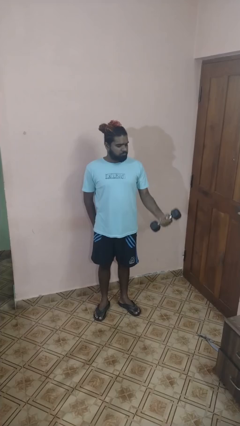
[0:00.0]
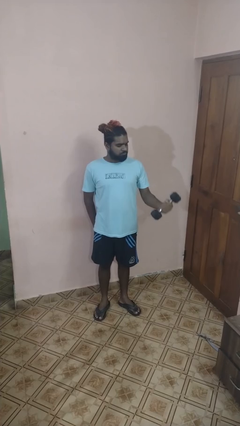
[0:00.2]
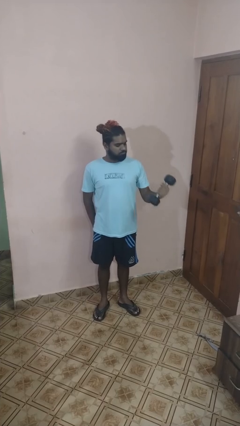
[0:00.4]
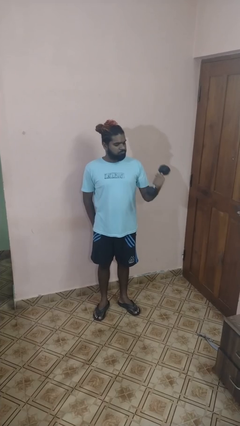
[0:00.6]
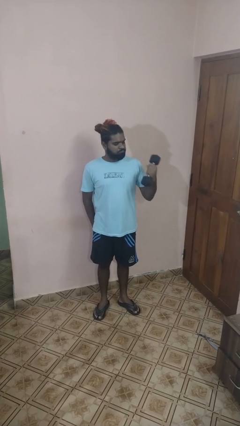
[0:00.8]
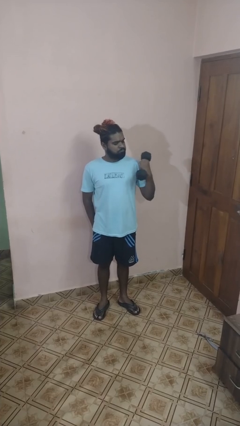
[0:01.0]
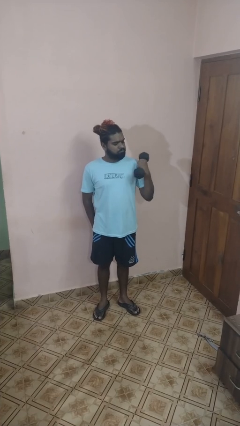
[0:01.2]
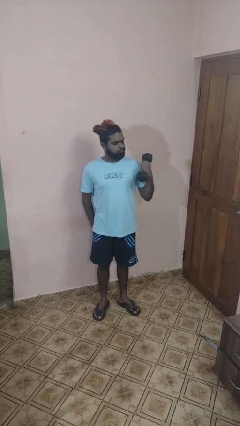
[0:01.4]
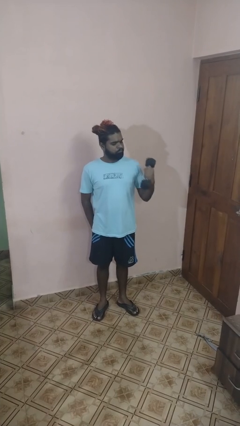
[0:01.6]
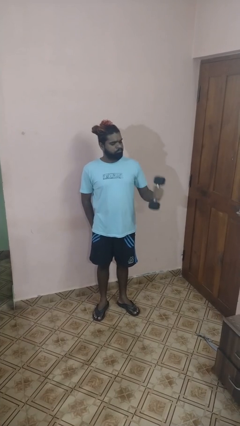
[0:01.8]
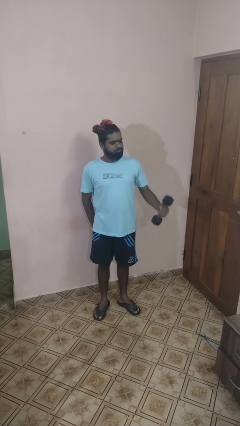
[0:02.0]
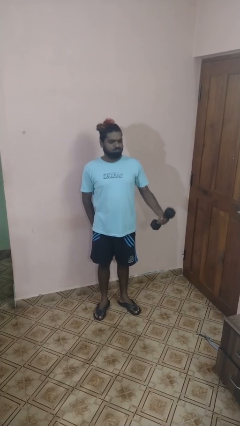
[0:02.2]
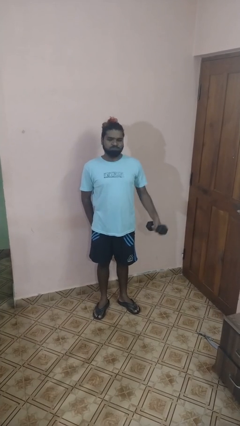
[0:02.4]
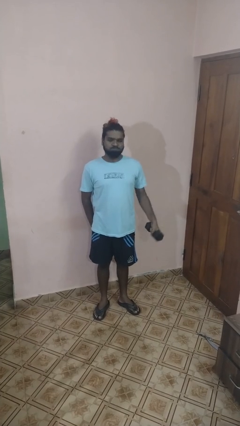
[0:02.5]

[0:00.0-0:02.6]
person lifts dumbbells

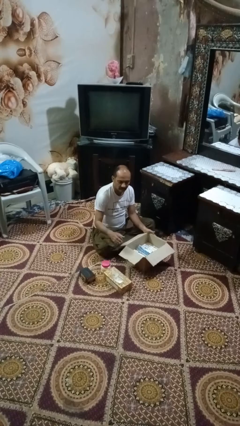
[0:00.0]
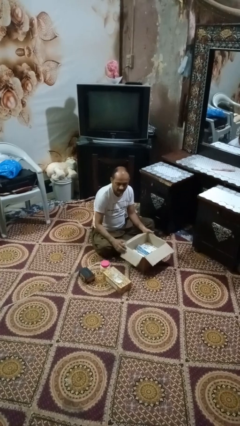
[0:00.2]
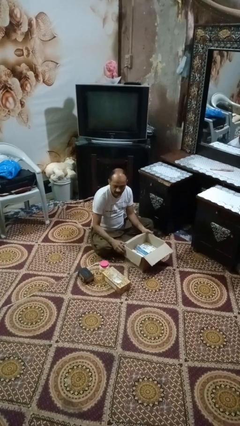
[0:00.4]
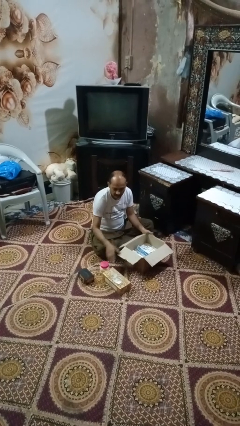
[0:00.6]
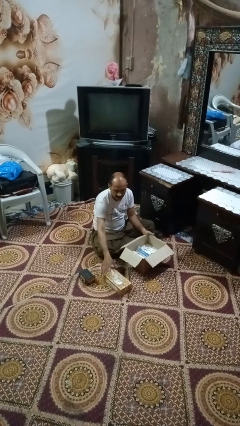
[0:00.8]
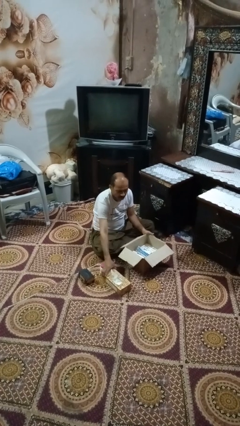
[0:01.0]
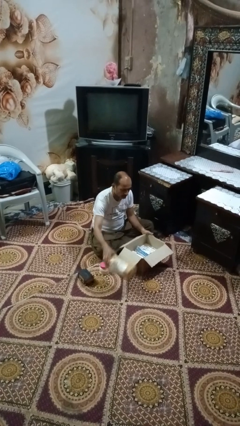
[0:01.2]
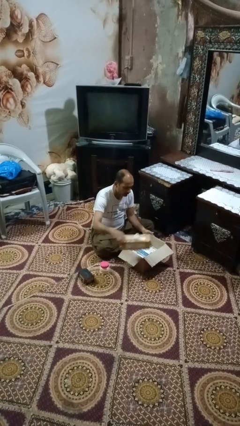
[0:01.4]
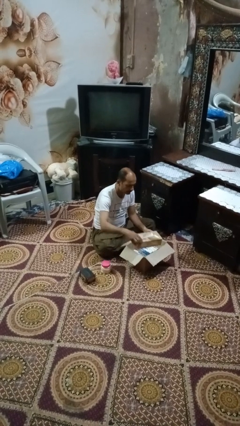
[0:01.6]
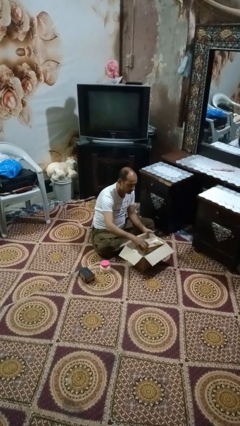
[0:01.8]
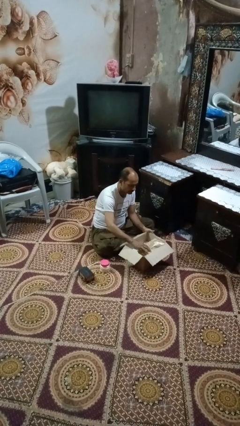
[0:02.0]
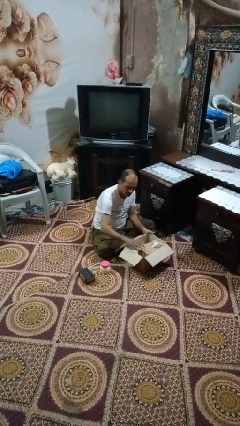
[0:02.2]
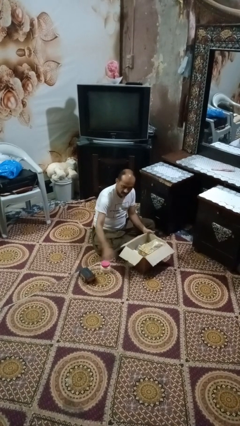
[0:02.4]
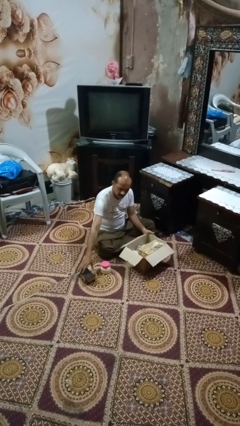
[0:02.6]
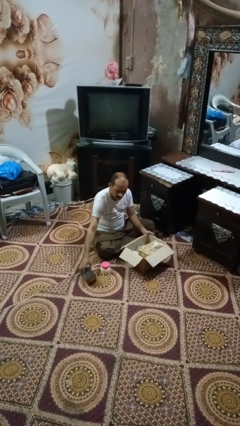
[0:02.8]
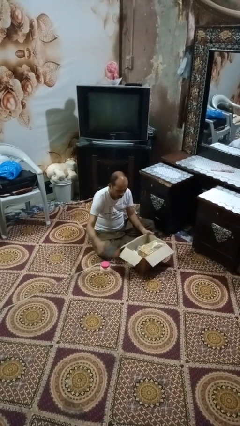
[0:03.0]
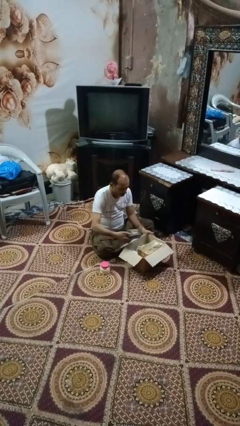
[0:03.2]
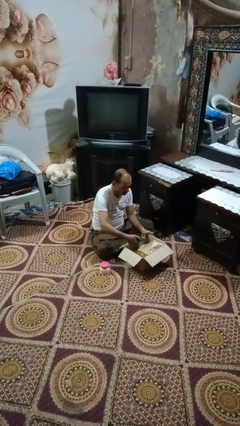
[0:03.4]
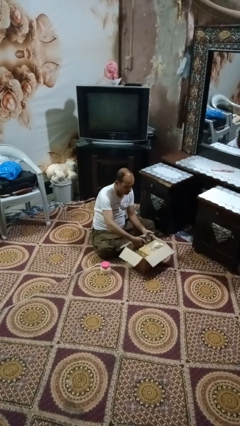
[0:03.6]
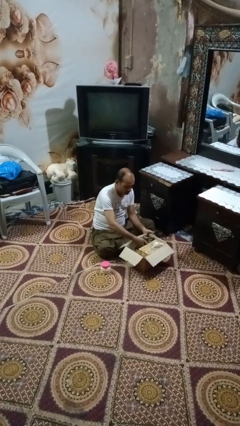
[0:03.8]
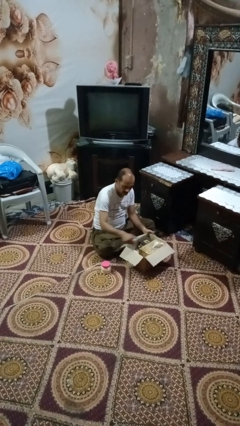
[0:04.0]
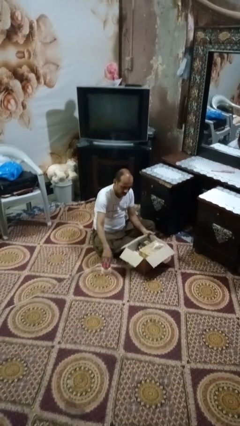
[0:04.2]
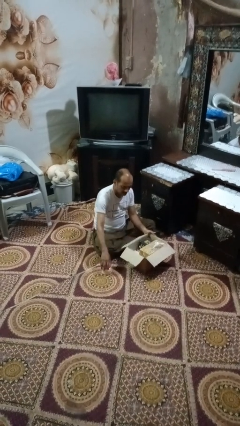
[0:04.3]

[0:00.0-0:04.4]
person puts object into box

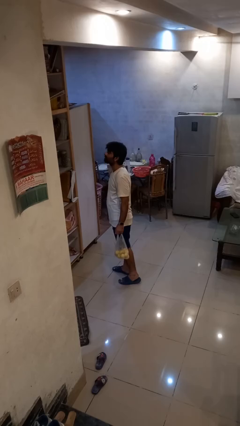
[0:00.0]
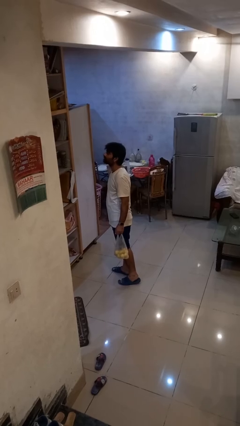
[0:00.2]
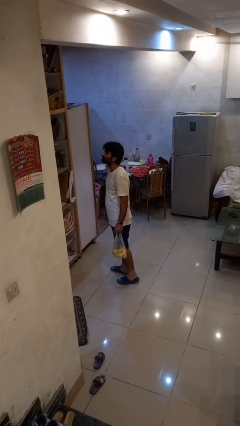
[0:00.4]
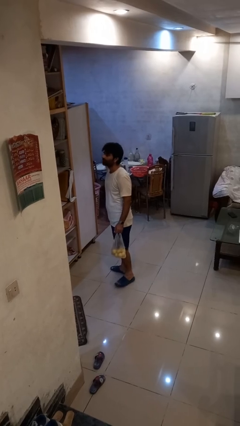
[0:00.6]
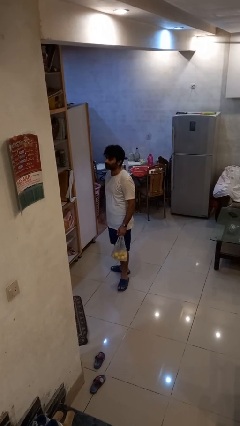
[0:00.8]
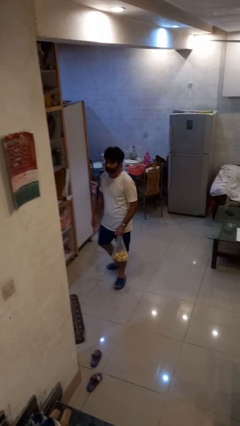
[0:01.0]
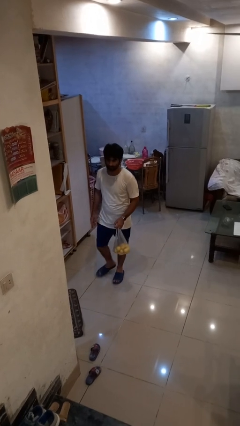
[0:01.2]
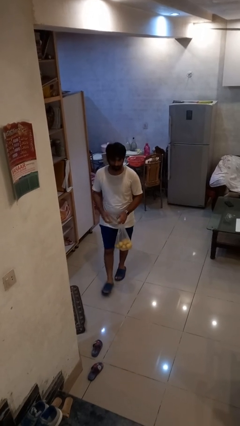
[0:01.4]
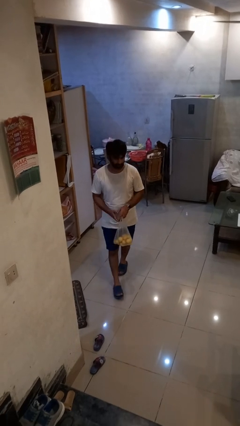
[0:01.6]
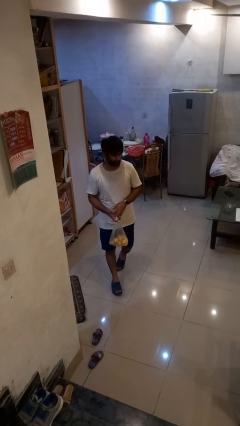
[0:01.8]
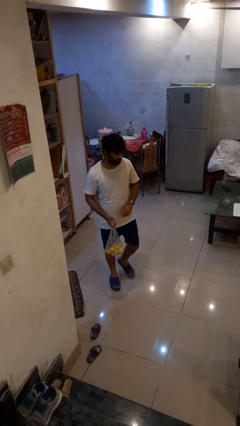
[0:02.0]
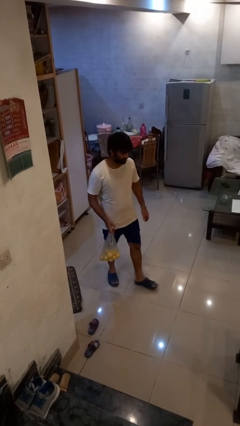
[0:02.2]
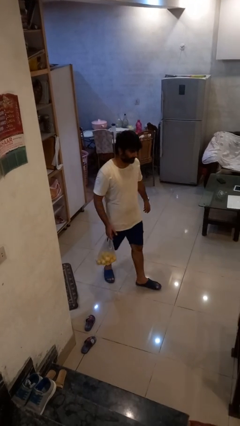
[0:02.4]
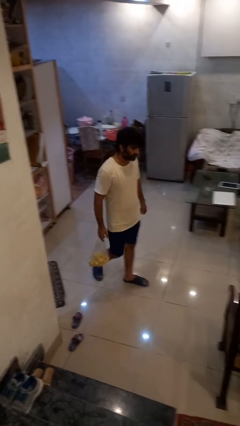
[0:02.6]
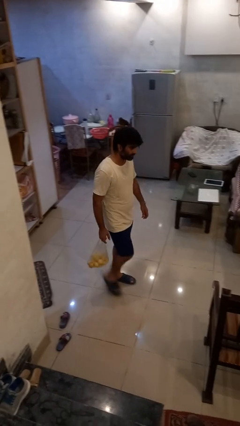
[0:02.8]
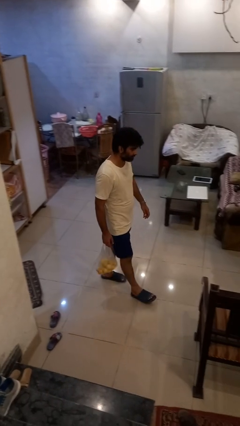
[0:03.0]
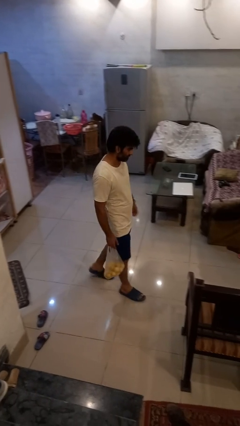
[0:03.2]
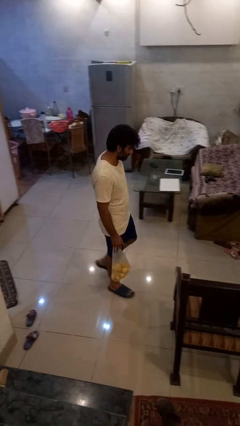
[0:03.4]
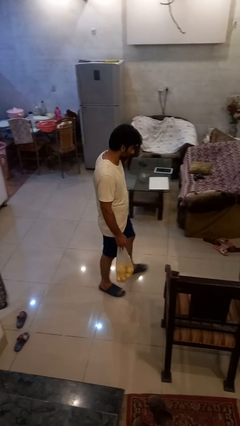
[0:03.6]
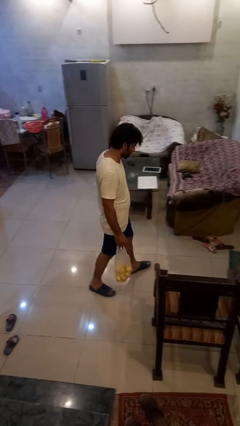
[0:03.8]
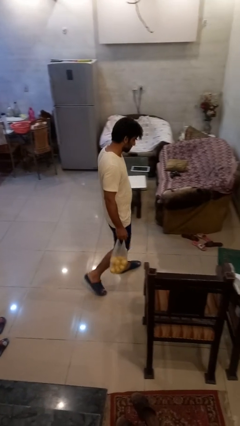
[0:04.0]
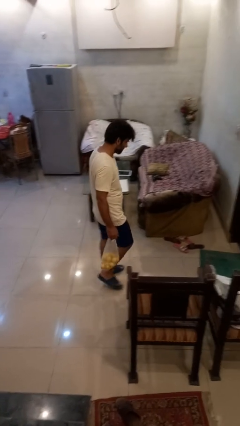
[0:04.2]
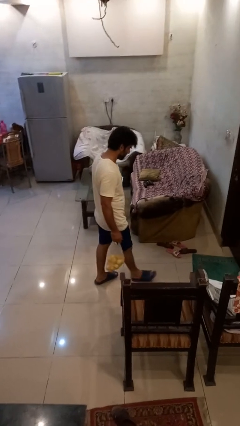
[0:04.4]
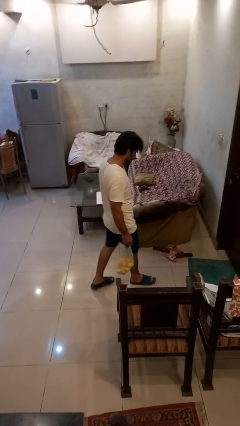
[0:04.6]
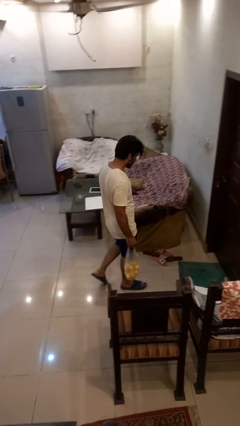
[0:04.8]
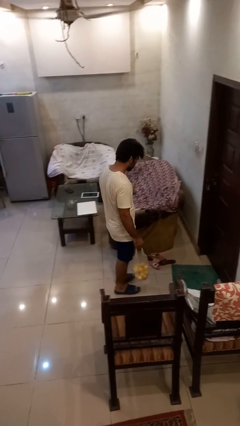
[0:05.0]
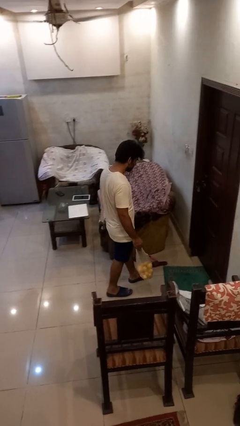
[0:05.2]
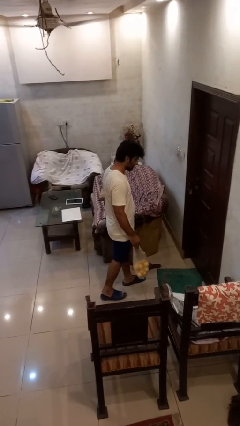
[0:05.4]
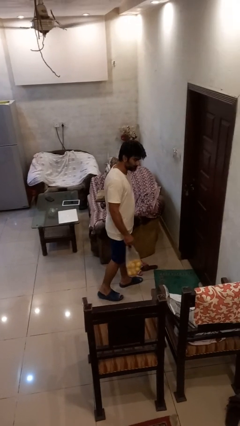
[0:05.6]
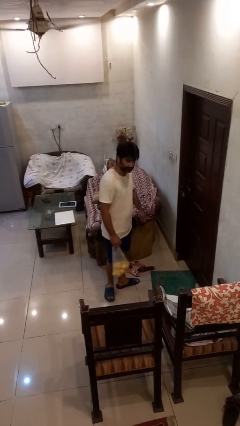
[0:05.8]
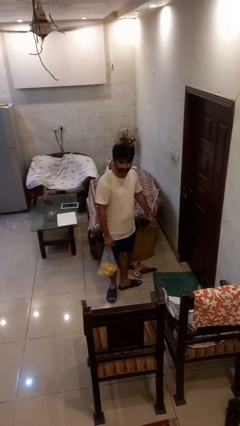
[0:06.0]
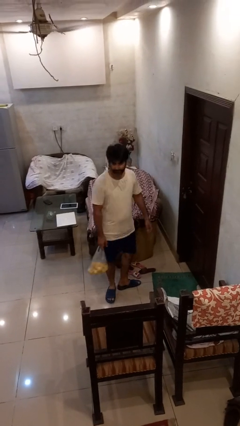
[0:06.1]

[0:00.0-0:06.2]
person carries groceries

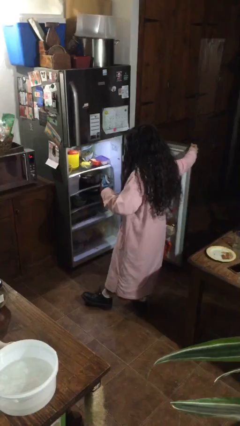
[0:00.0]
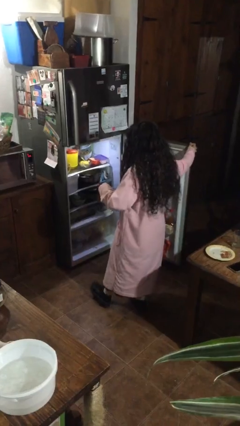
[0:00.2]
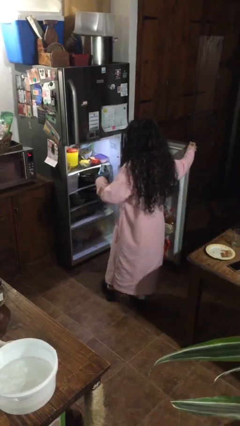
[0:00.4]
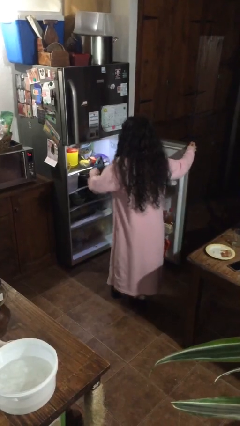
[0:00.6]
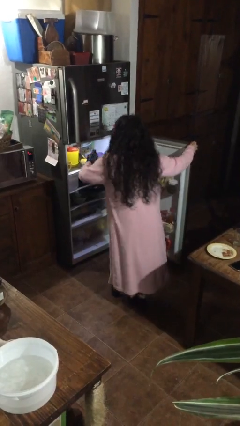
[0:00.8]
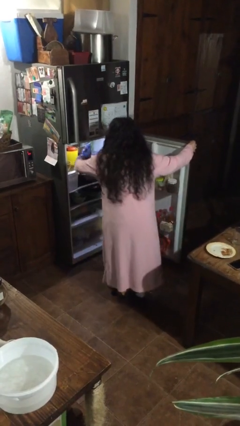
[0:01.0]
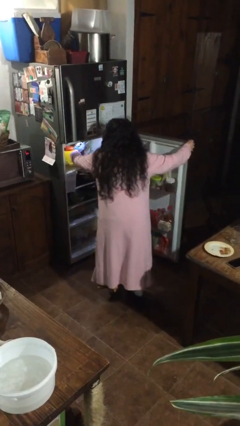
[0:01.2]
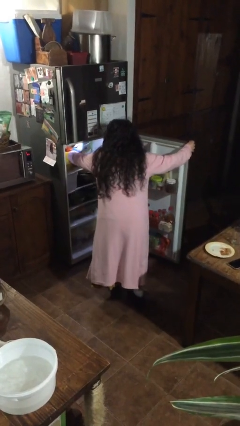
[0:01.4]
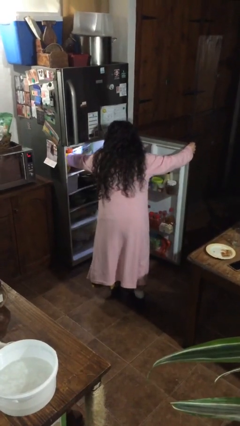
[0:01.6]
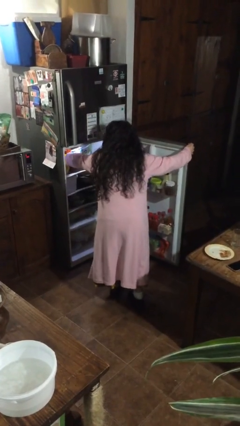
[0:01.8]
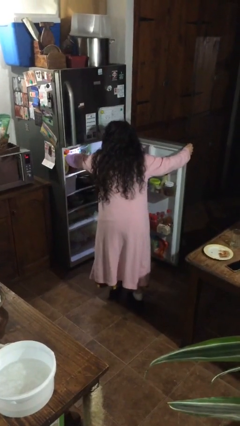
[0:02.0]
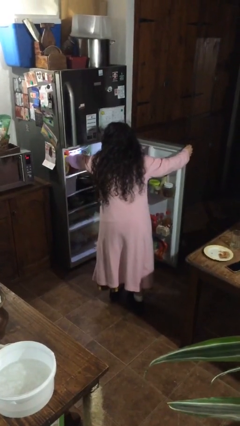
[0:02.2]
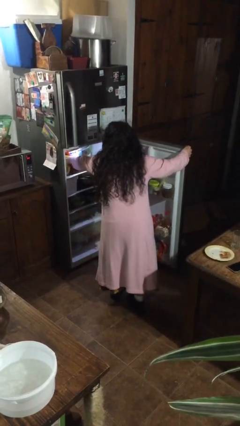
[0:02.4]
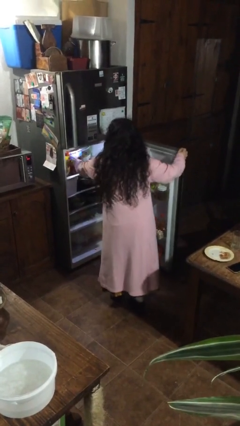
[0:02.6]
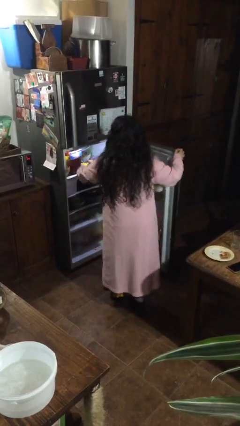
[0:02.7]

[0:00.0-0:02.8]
person puts object into refrigerator

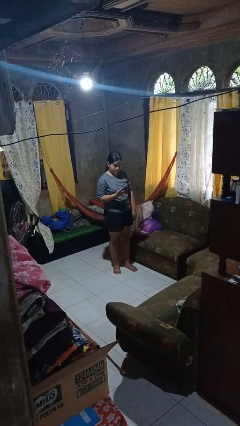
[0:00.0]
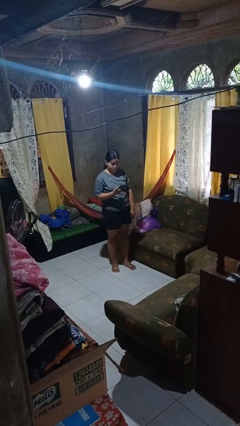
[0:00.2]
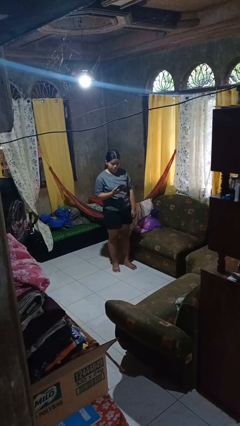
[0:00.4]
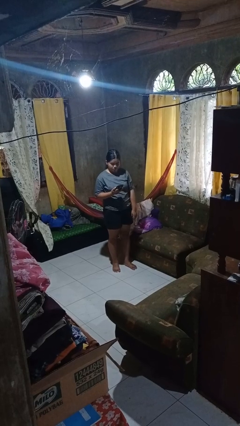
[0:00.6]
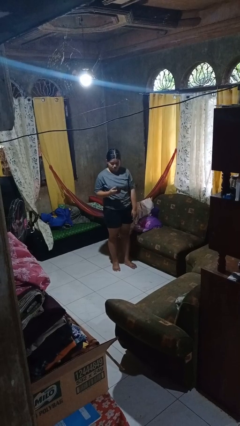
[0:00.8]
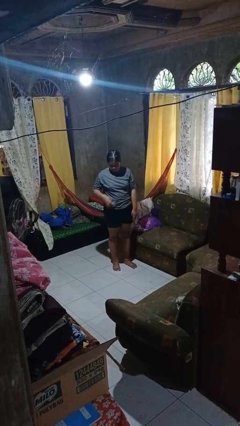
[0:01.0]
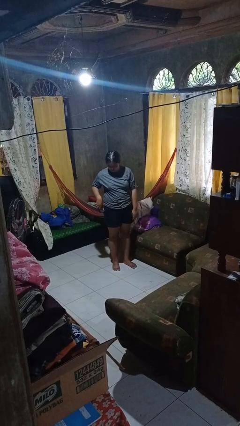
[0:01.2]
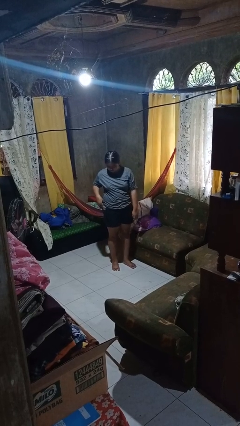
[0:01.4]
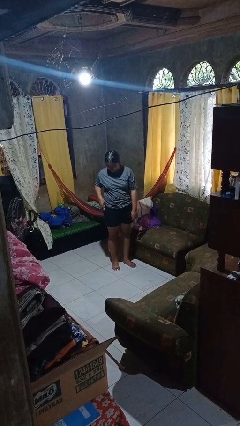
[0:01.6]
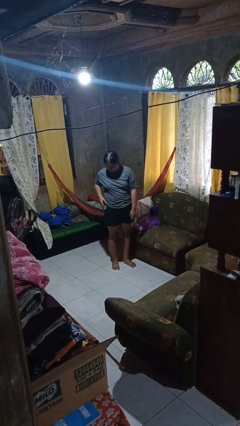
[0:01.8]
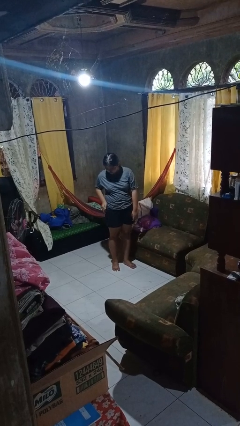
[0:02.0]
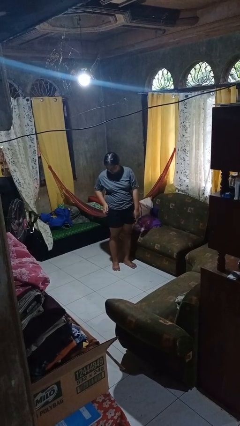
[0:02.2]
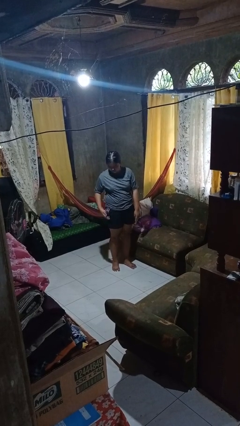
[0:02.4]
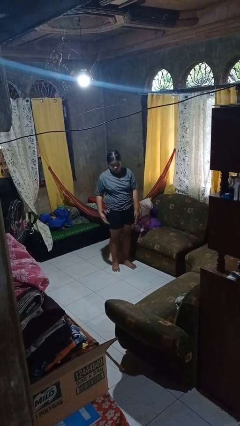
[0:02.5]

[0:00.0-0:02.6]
person puts phone into pocket
